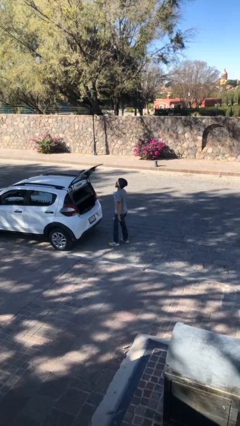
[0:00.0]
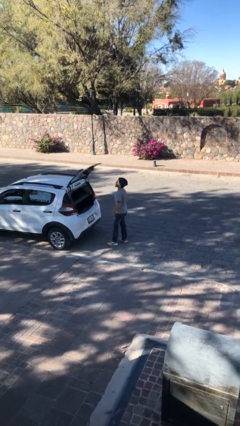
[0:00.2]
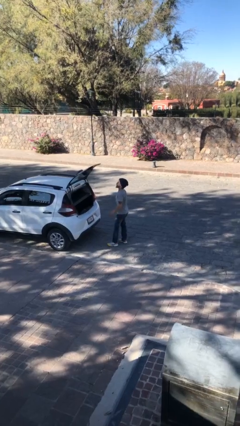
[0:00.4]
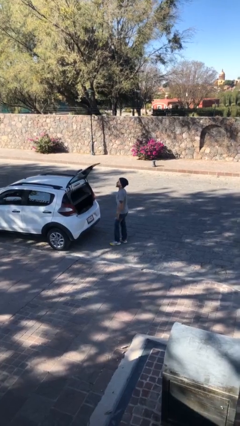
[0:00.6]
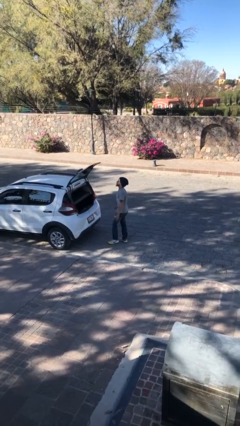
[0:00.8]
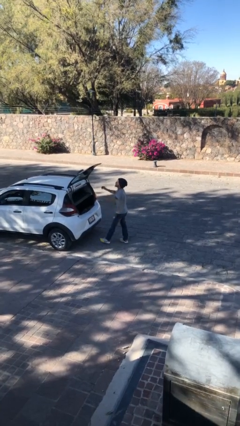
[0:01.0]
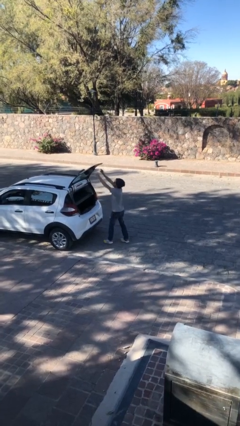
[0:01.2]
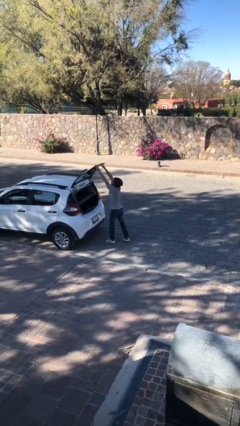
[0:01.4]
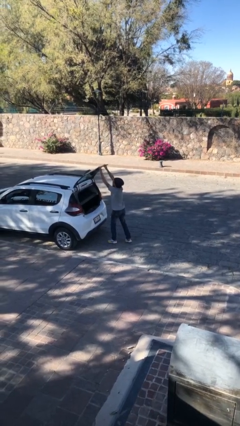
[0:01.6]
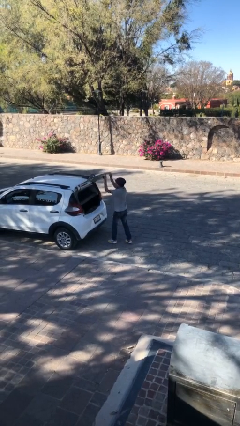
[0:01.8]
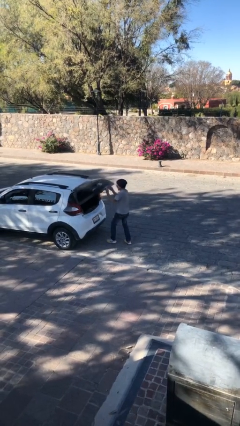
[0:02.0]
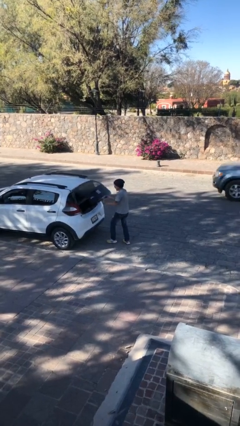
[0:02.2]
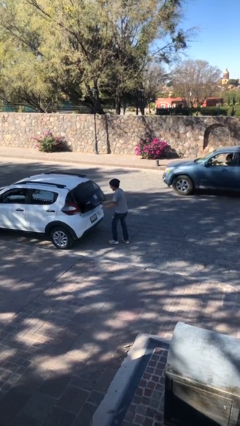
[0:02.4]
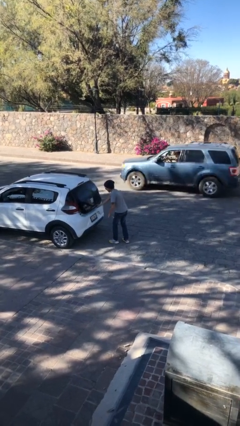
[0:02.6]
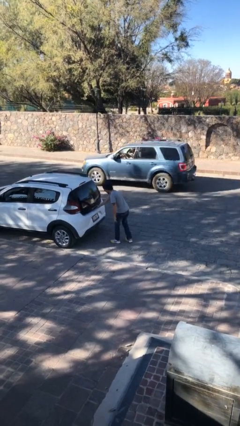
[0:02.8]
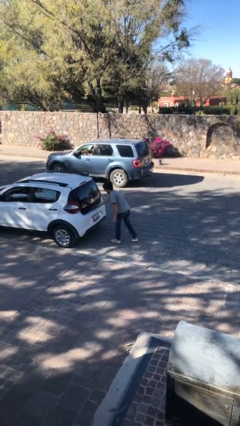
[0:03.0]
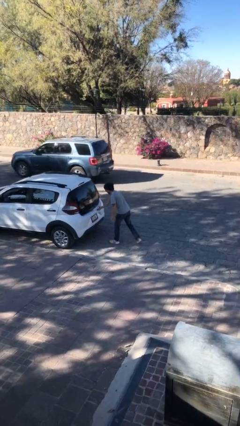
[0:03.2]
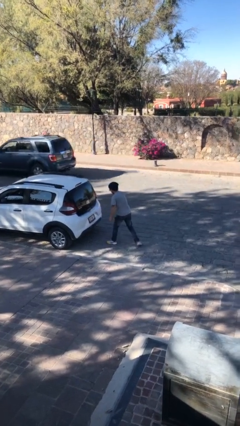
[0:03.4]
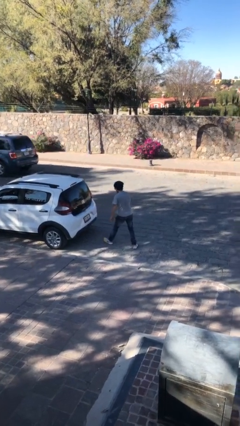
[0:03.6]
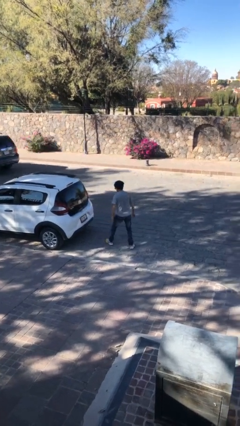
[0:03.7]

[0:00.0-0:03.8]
person closes car trunk

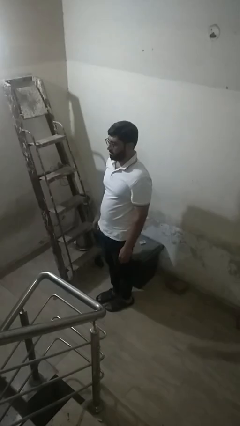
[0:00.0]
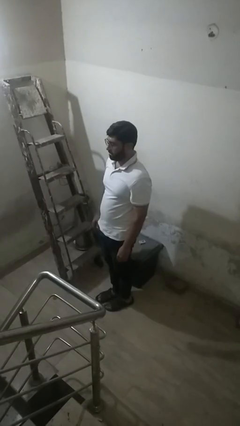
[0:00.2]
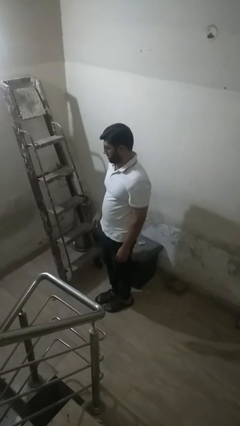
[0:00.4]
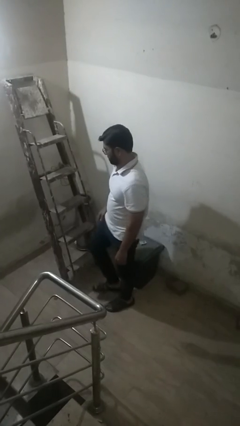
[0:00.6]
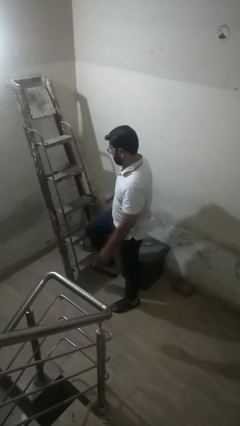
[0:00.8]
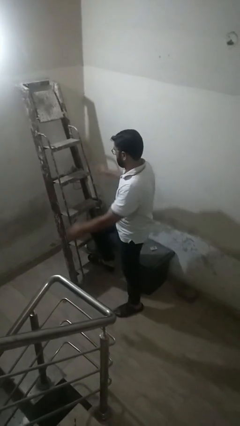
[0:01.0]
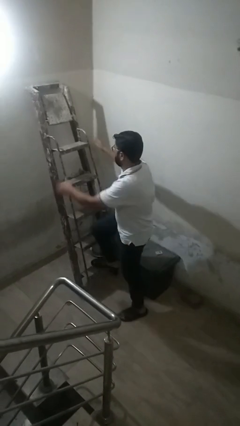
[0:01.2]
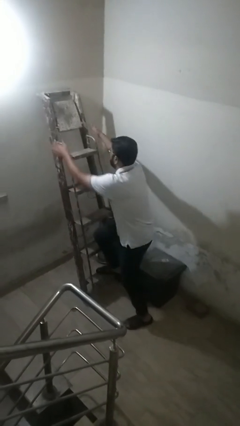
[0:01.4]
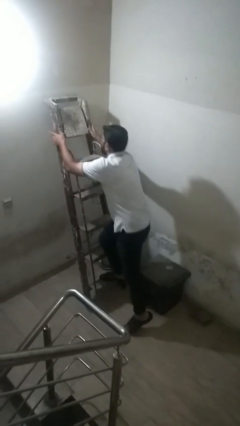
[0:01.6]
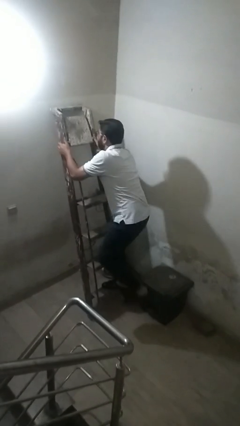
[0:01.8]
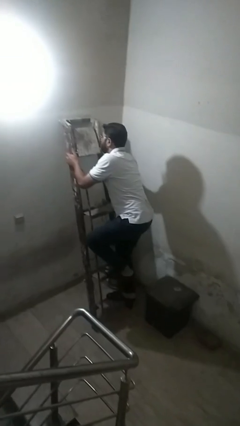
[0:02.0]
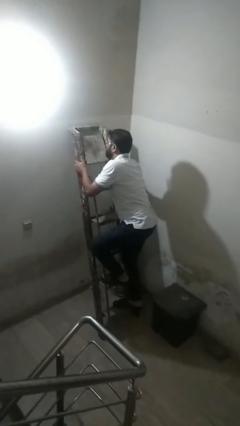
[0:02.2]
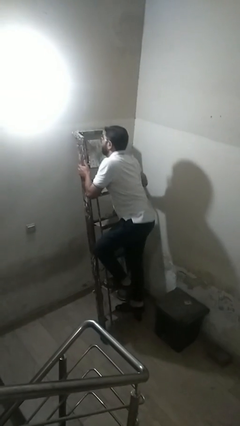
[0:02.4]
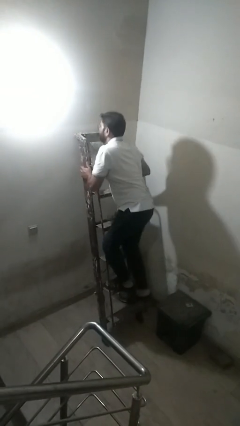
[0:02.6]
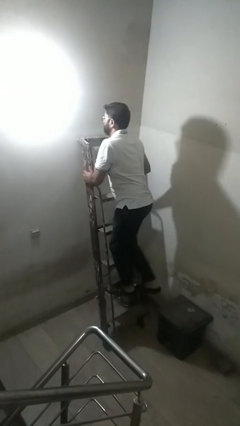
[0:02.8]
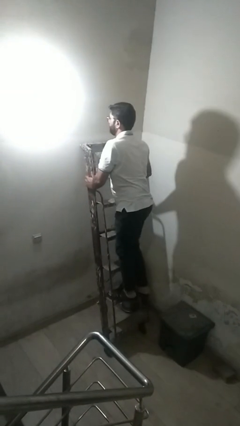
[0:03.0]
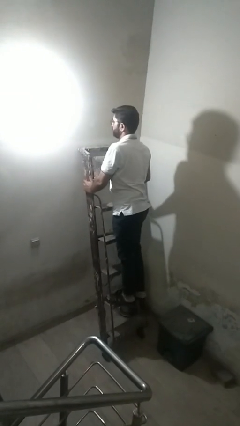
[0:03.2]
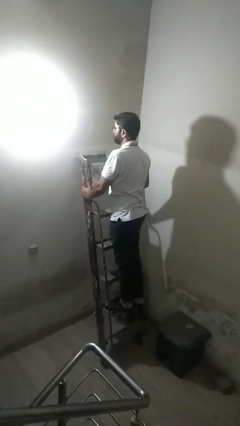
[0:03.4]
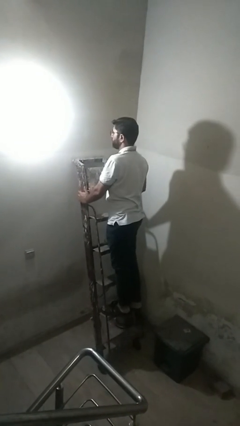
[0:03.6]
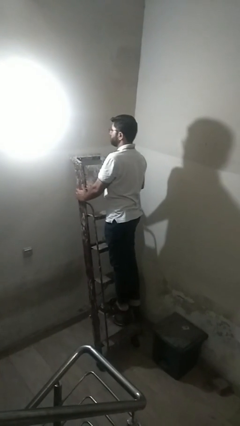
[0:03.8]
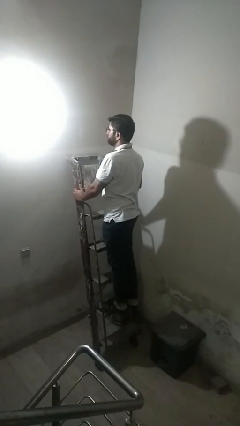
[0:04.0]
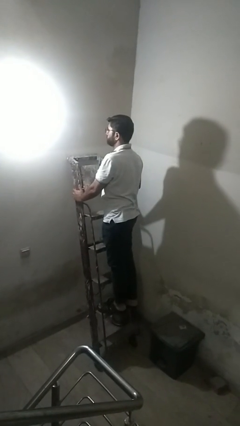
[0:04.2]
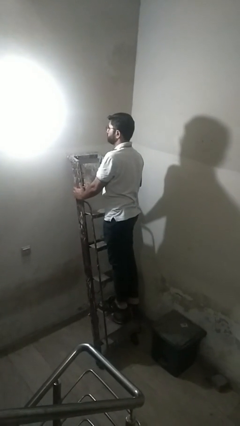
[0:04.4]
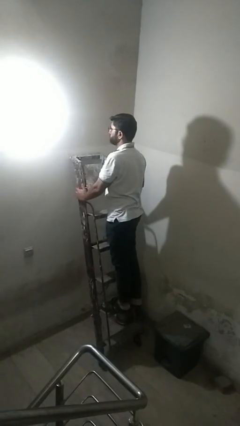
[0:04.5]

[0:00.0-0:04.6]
person climbs up ladder

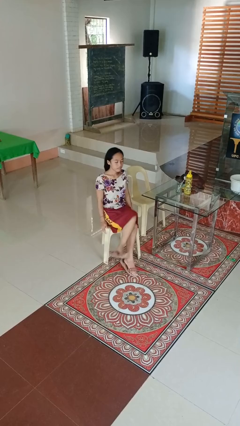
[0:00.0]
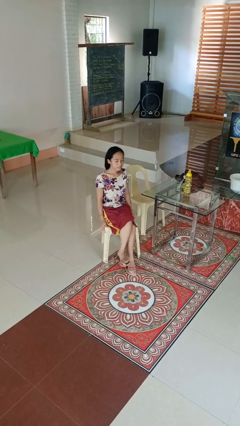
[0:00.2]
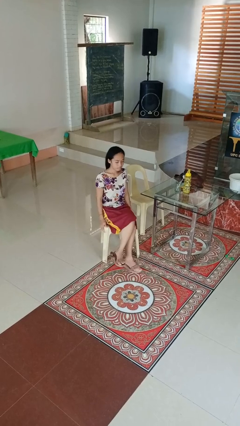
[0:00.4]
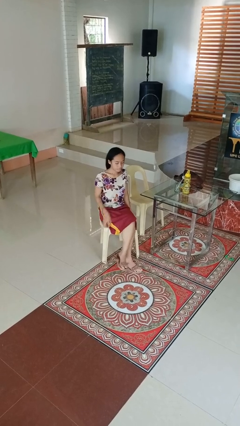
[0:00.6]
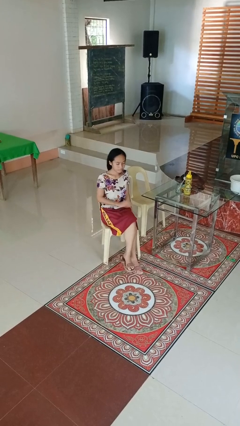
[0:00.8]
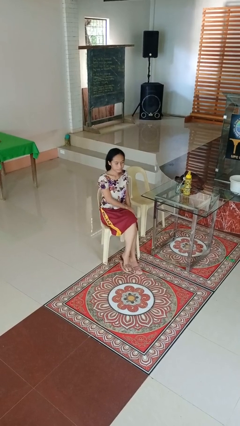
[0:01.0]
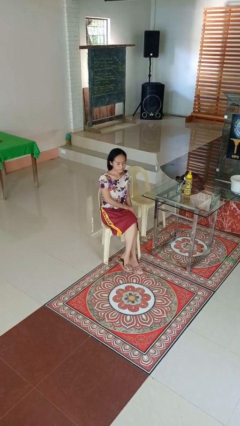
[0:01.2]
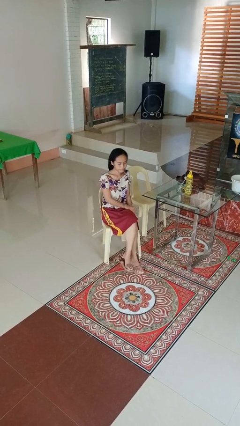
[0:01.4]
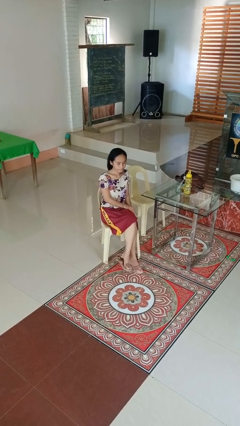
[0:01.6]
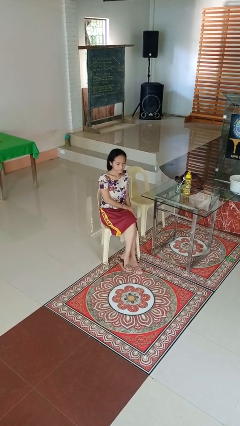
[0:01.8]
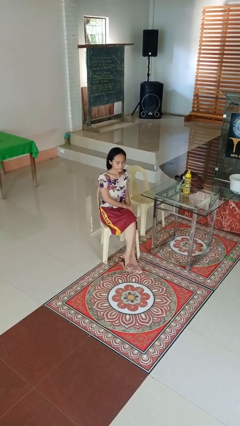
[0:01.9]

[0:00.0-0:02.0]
person crosses legs

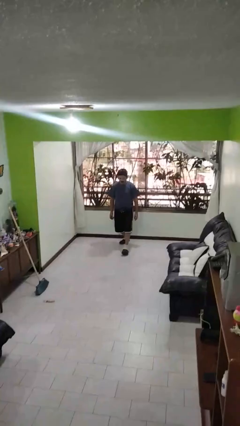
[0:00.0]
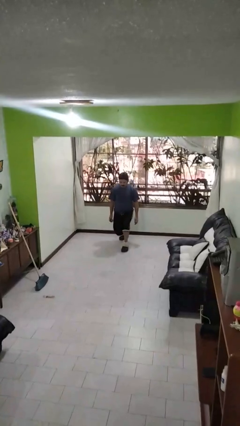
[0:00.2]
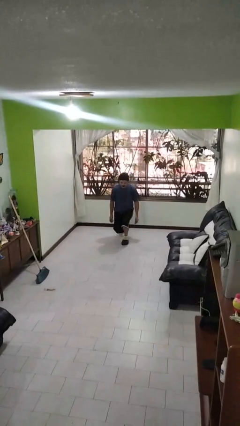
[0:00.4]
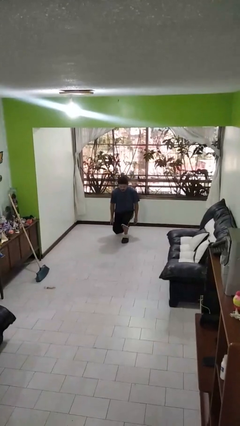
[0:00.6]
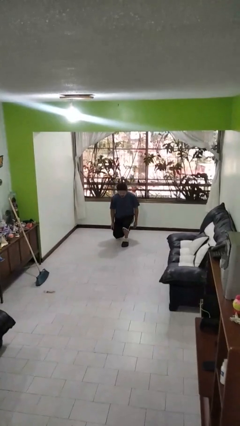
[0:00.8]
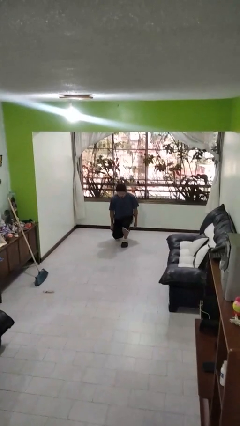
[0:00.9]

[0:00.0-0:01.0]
person kneels

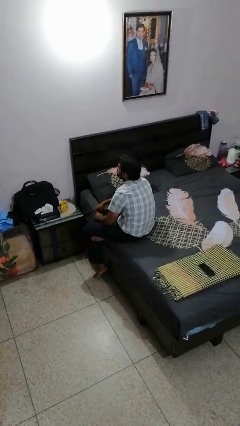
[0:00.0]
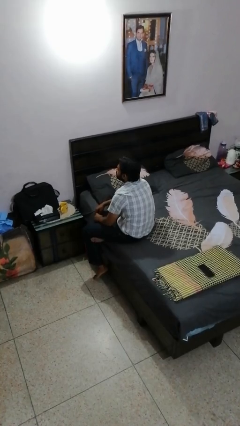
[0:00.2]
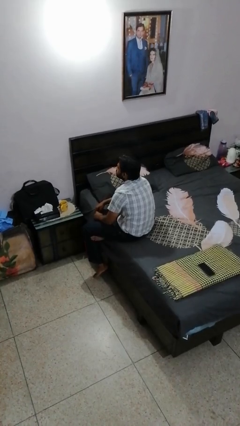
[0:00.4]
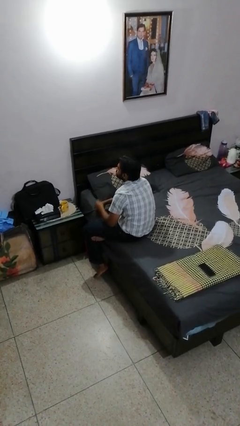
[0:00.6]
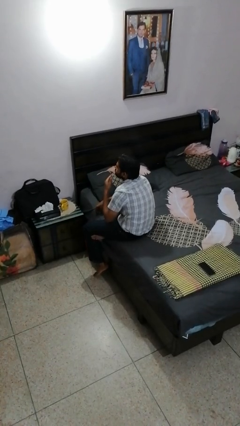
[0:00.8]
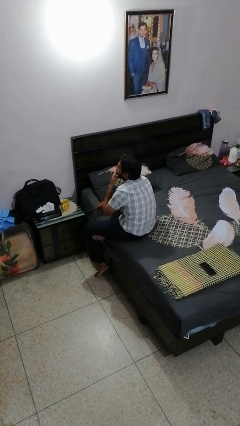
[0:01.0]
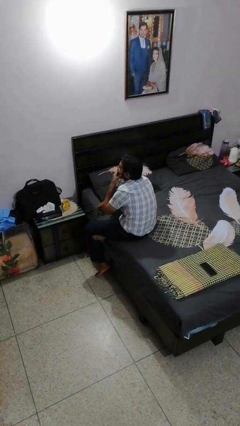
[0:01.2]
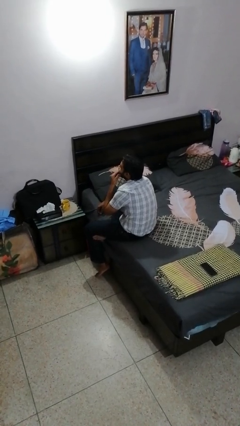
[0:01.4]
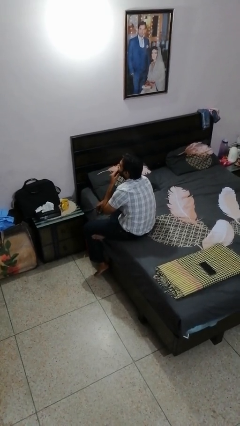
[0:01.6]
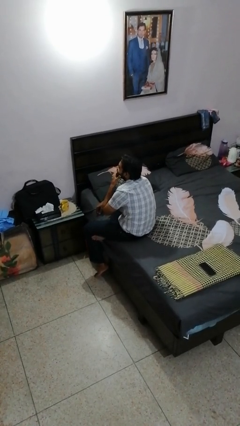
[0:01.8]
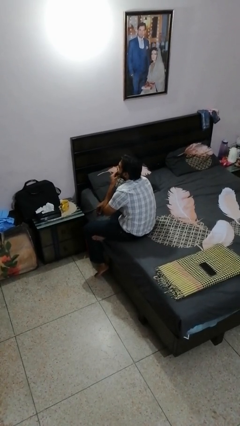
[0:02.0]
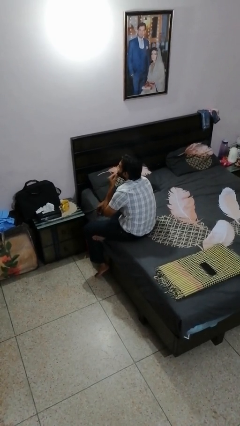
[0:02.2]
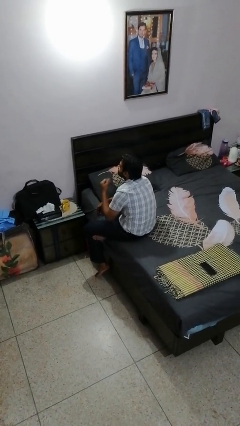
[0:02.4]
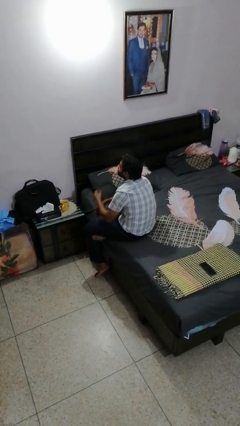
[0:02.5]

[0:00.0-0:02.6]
person strokes chin

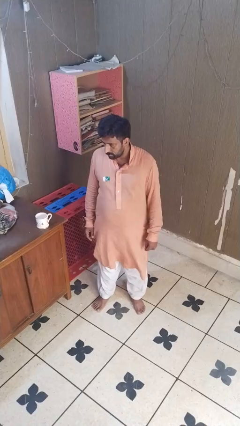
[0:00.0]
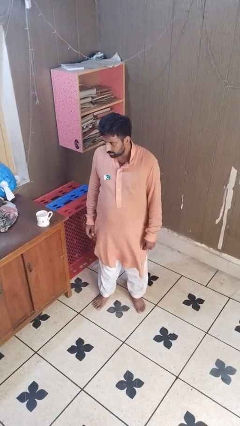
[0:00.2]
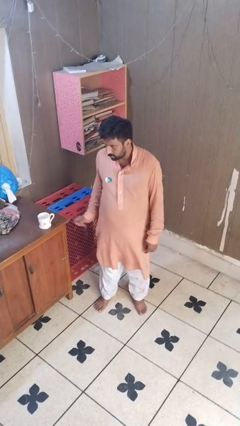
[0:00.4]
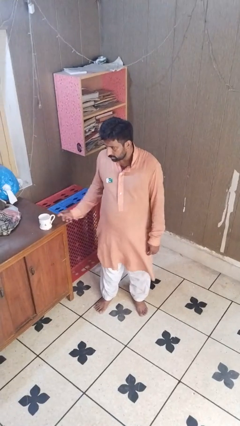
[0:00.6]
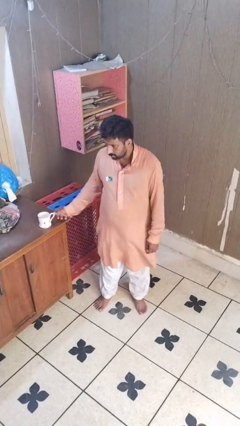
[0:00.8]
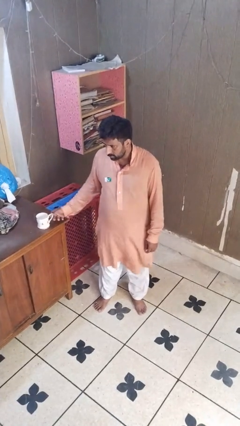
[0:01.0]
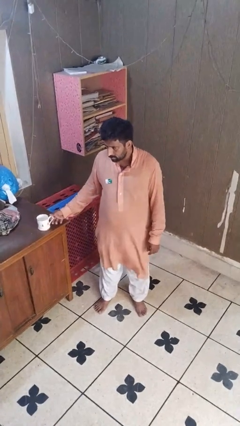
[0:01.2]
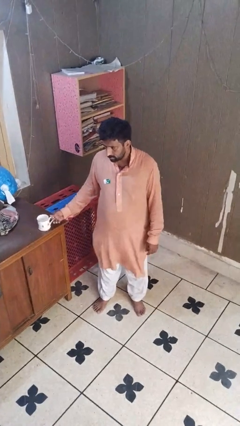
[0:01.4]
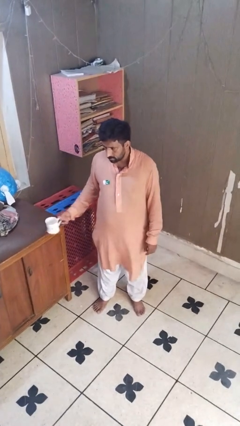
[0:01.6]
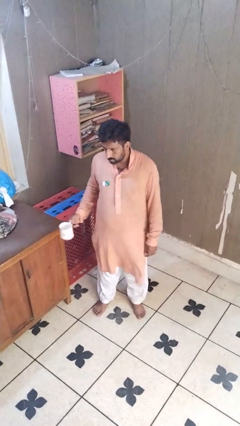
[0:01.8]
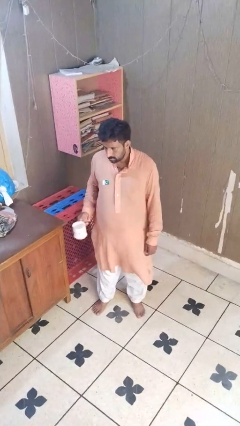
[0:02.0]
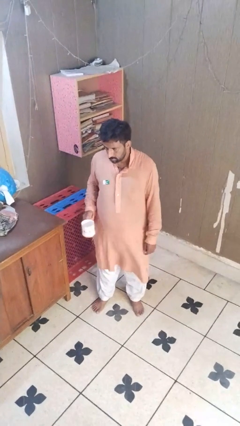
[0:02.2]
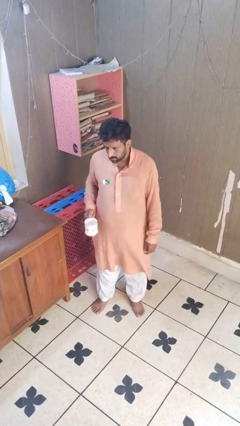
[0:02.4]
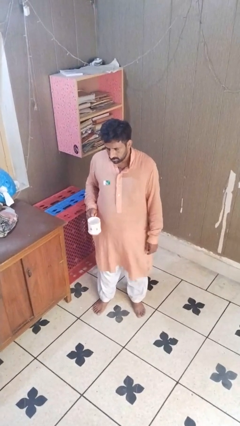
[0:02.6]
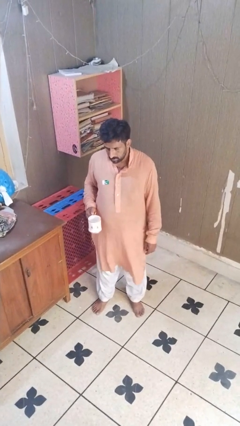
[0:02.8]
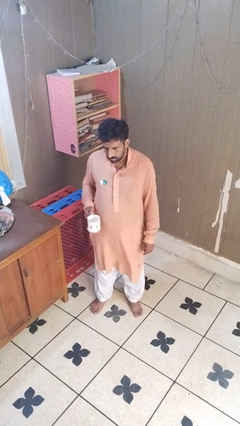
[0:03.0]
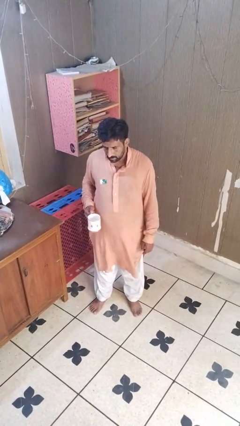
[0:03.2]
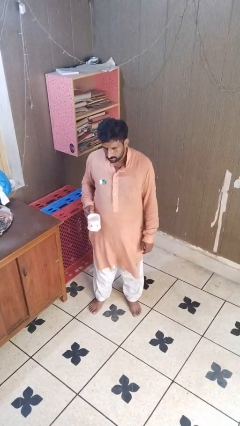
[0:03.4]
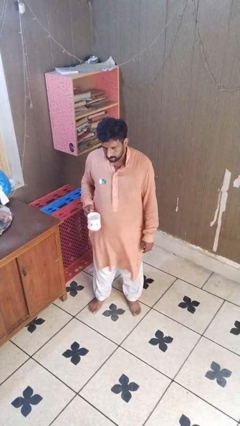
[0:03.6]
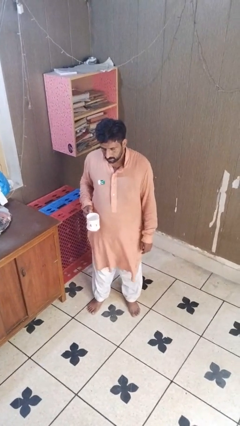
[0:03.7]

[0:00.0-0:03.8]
person picks up object from table
